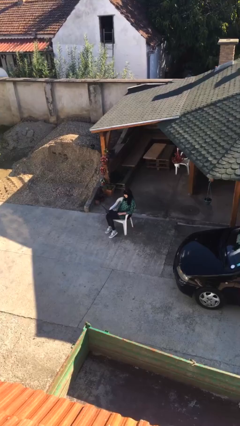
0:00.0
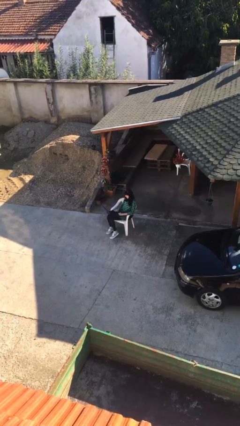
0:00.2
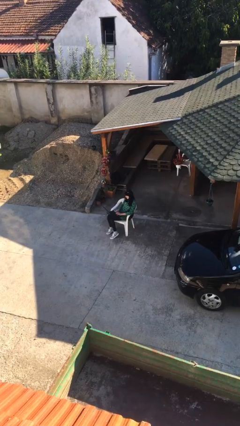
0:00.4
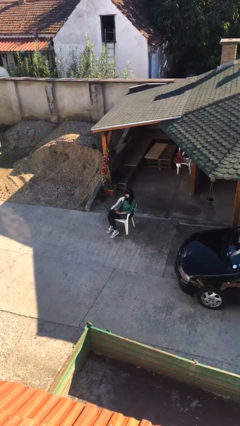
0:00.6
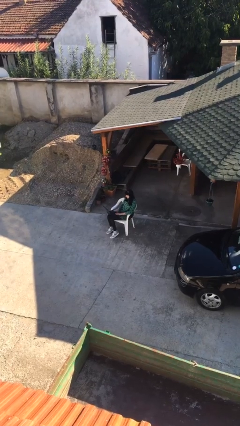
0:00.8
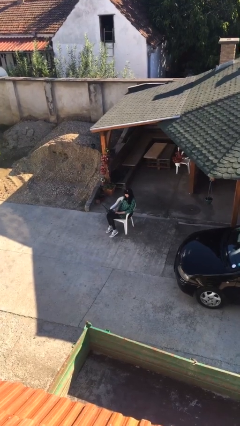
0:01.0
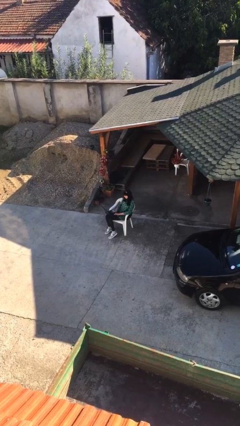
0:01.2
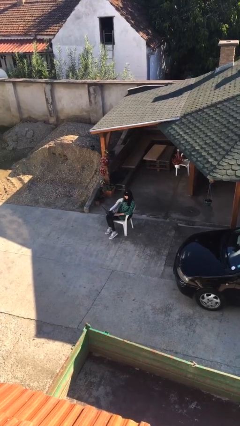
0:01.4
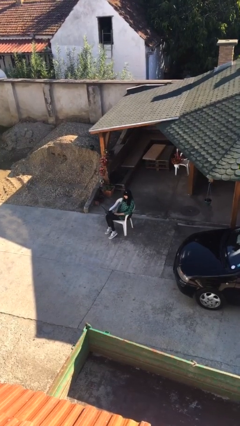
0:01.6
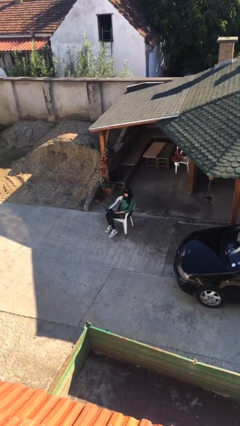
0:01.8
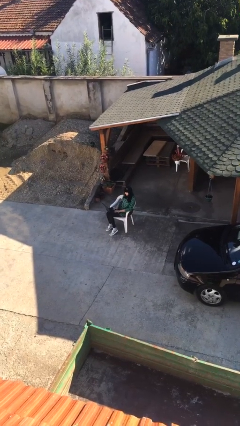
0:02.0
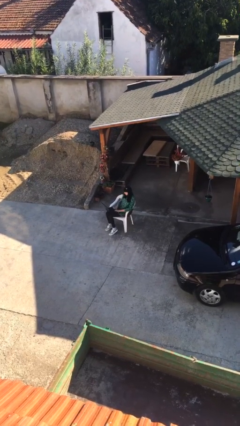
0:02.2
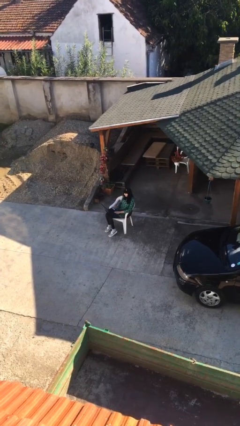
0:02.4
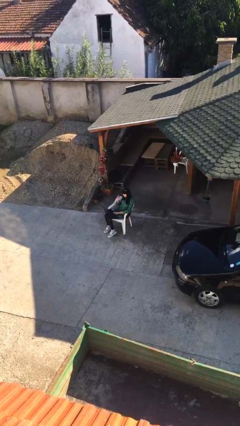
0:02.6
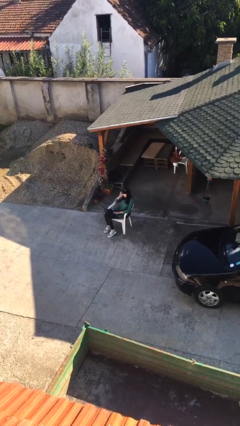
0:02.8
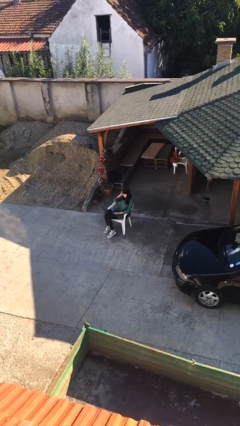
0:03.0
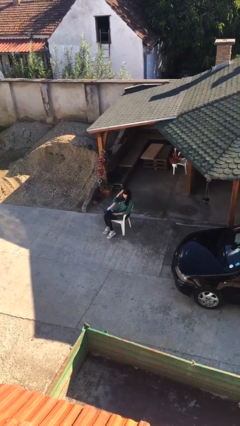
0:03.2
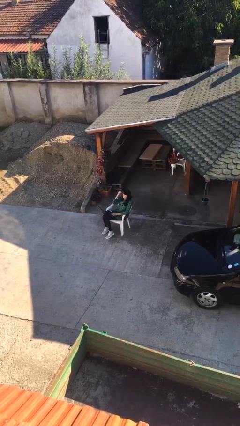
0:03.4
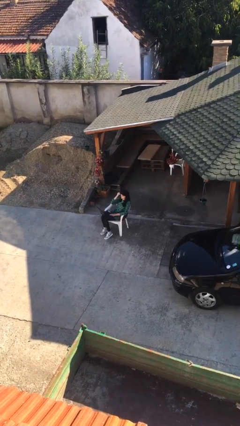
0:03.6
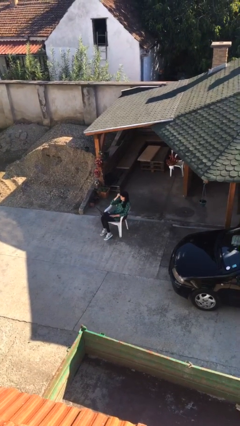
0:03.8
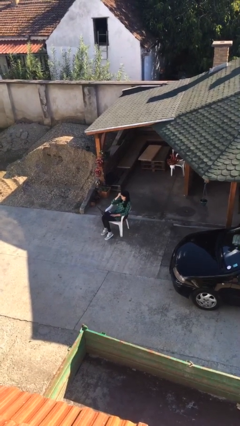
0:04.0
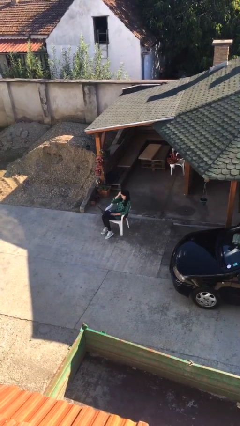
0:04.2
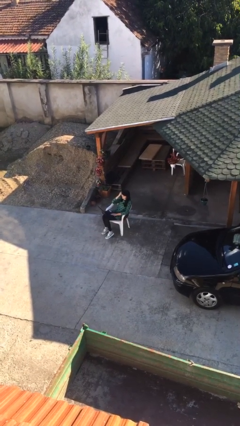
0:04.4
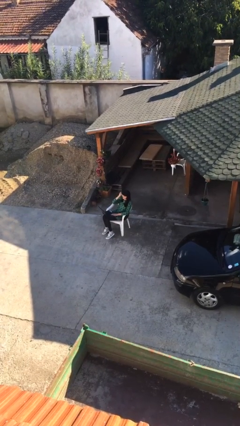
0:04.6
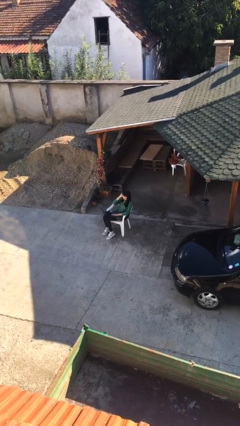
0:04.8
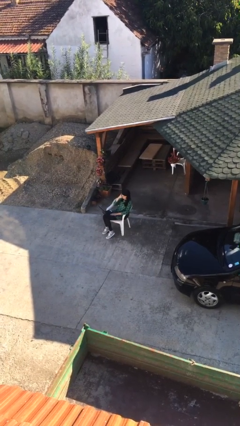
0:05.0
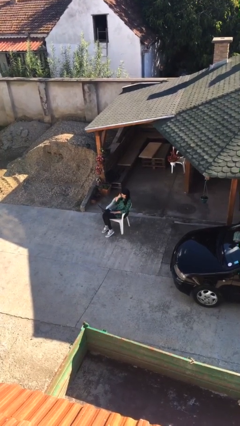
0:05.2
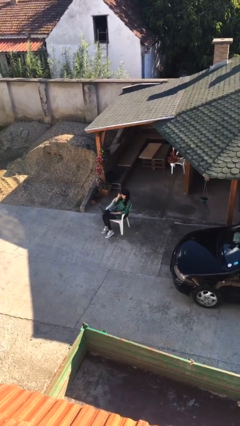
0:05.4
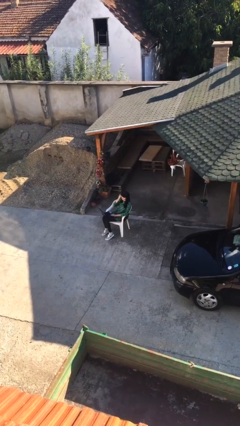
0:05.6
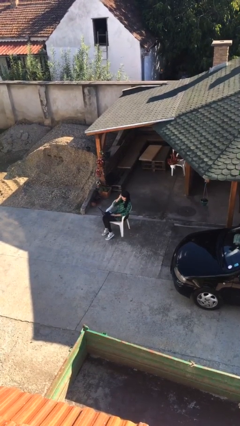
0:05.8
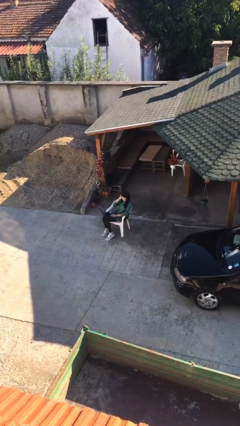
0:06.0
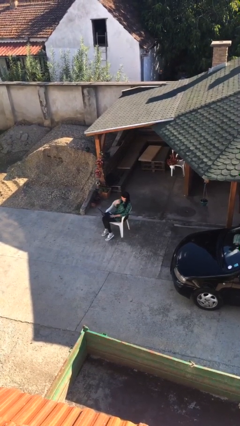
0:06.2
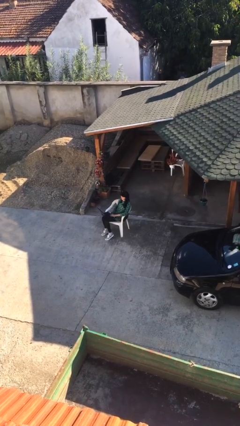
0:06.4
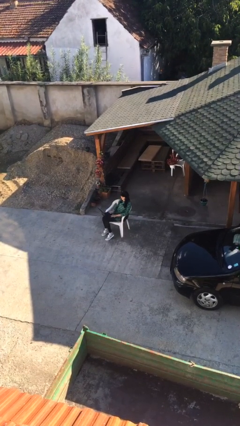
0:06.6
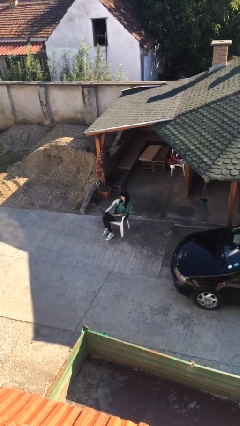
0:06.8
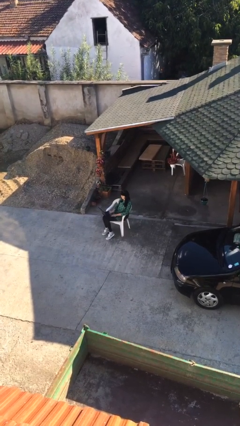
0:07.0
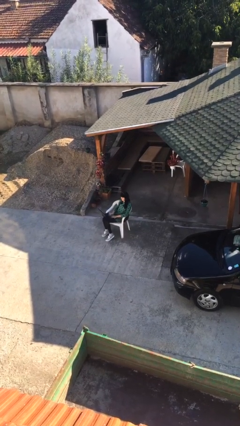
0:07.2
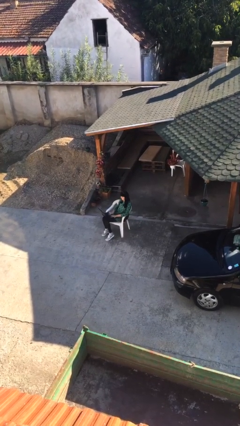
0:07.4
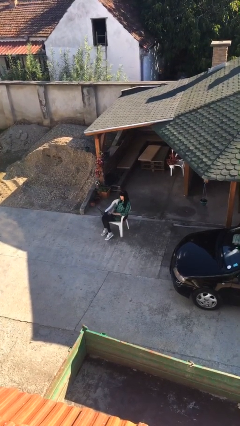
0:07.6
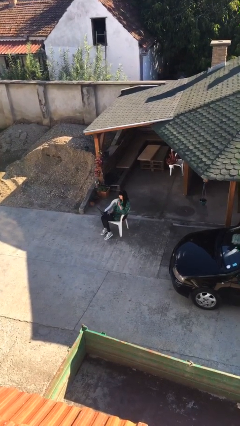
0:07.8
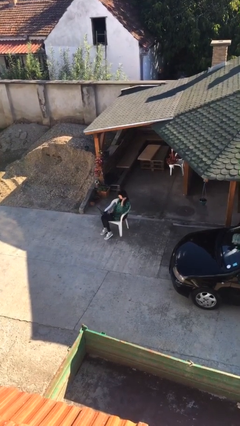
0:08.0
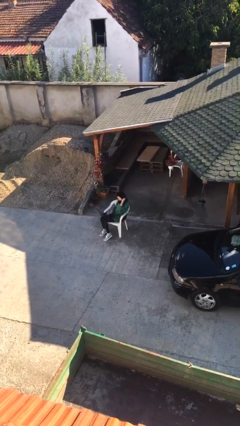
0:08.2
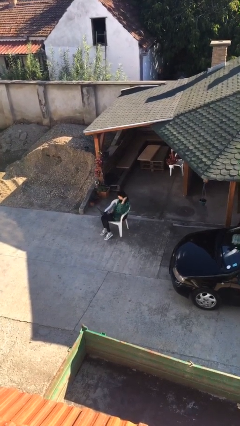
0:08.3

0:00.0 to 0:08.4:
person interacts with laptop

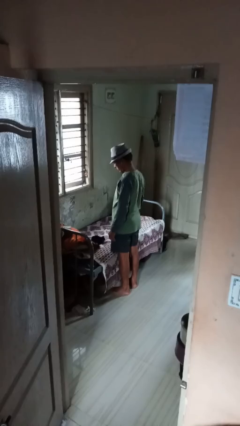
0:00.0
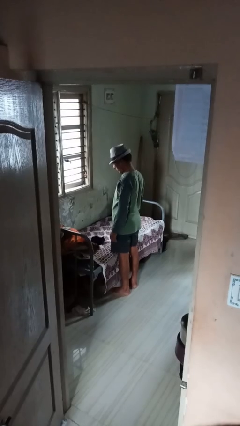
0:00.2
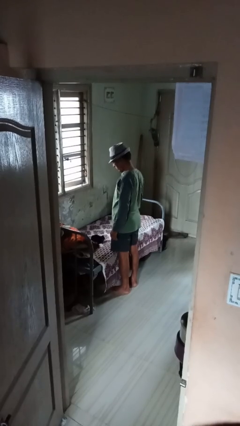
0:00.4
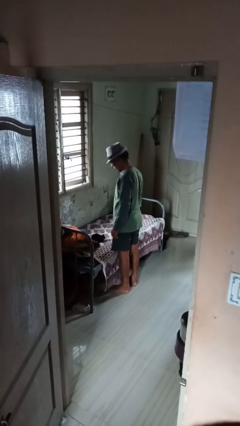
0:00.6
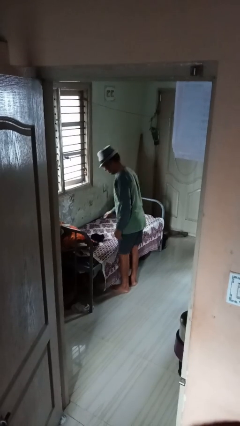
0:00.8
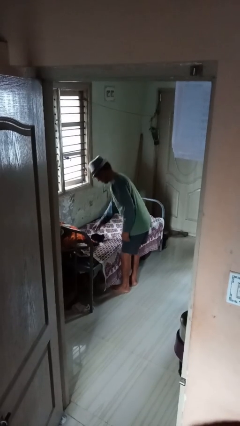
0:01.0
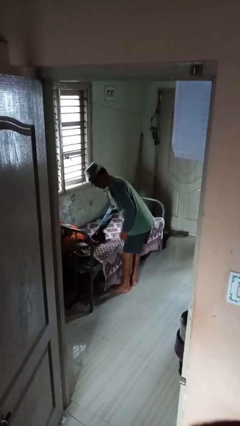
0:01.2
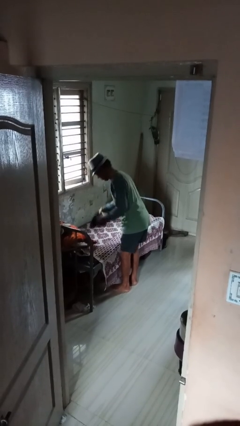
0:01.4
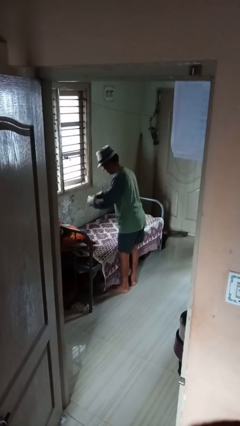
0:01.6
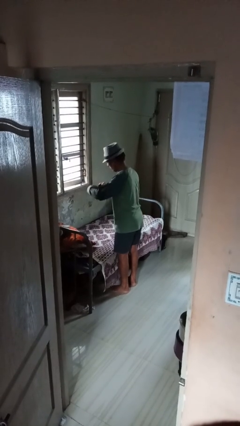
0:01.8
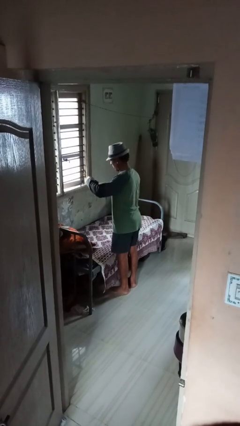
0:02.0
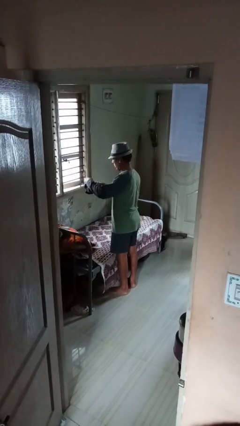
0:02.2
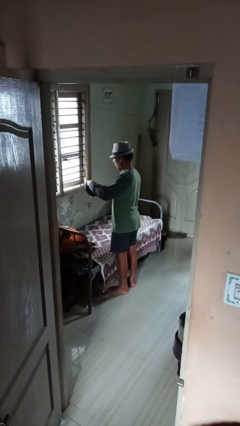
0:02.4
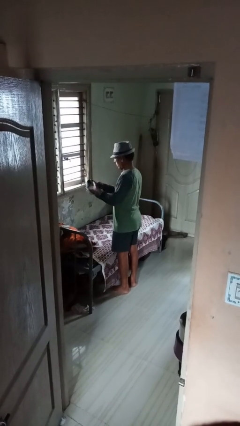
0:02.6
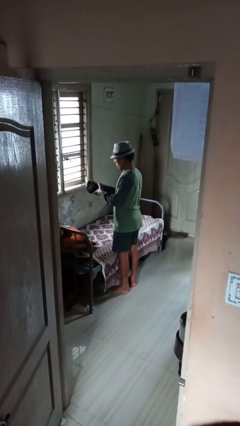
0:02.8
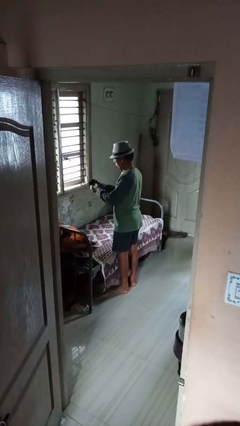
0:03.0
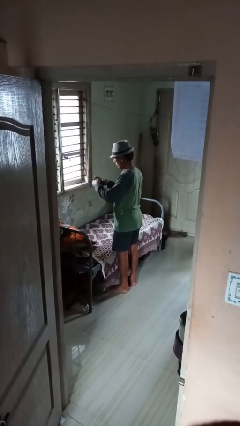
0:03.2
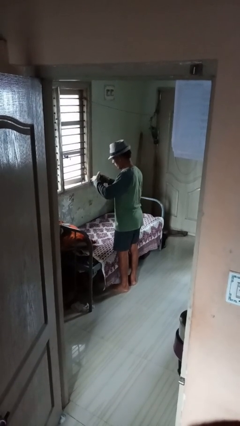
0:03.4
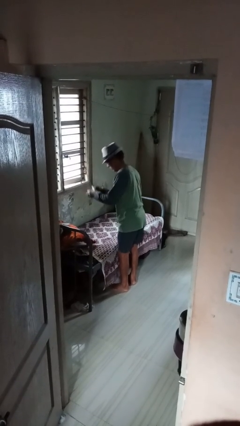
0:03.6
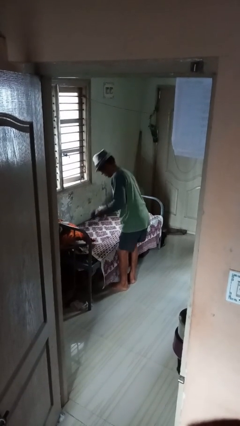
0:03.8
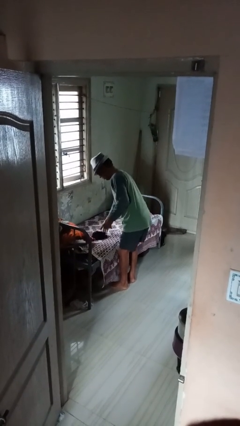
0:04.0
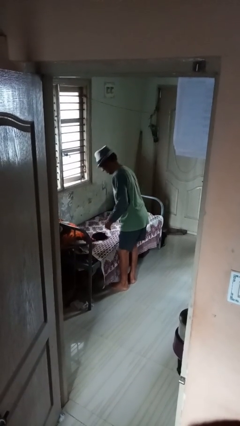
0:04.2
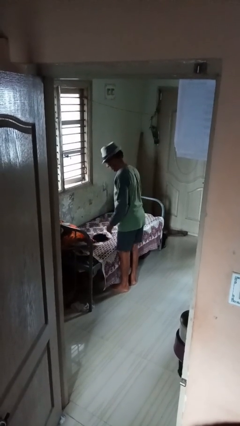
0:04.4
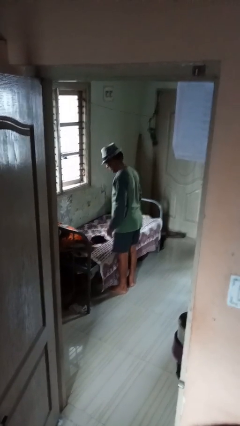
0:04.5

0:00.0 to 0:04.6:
person folds socks

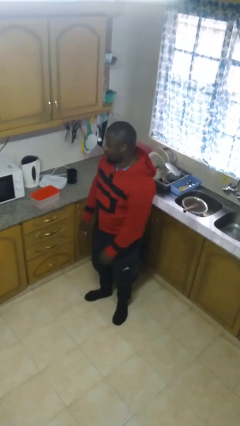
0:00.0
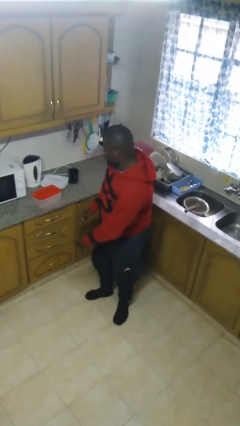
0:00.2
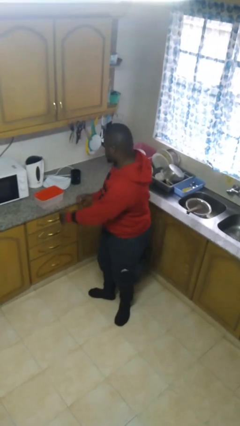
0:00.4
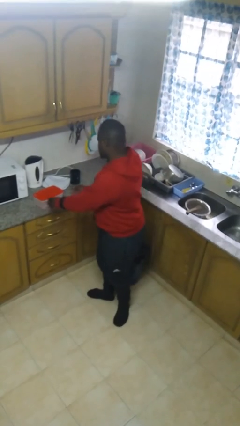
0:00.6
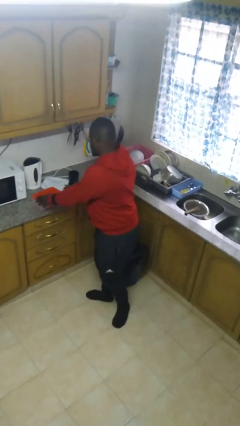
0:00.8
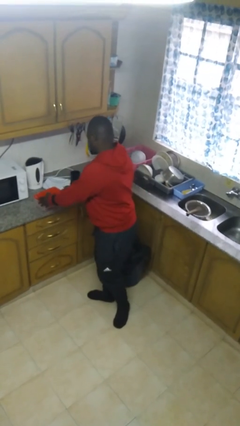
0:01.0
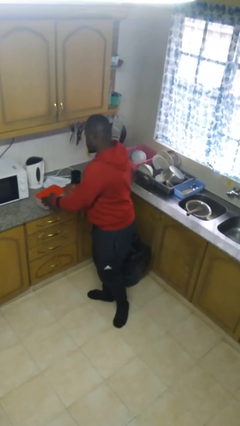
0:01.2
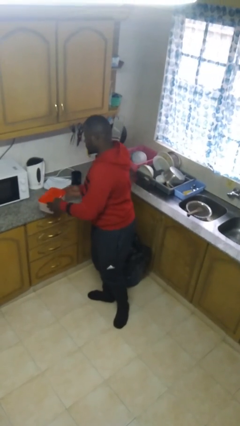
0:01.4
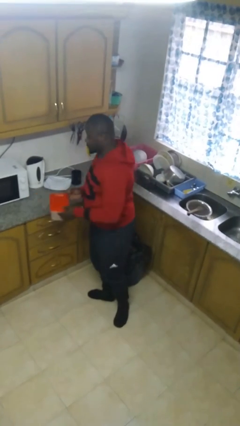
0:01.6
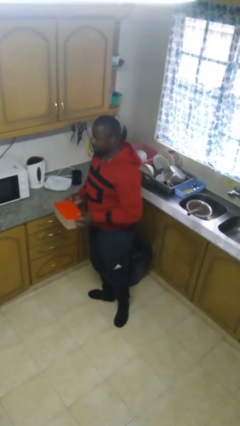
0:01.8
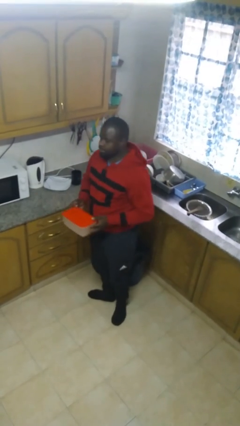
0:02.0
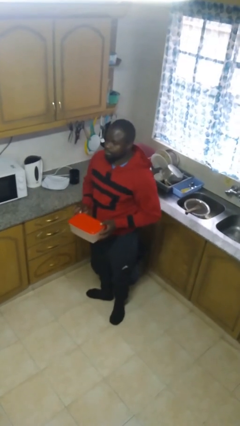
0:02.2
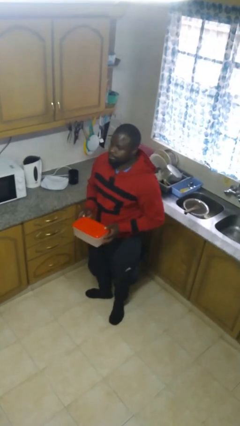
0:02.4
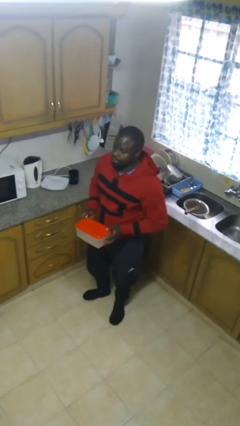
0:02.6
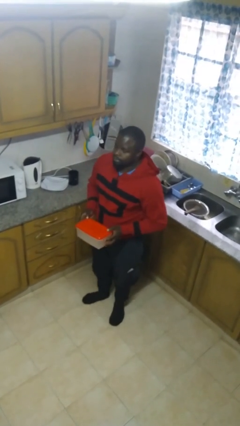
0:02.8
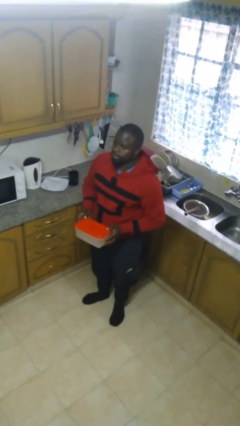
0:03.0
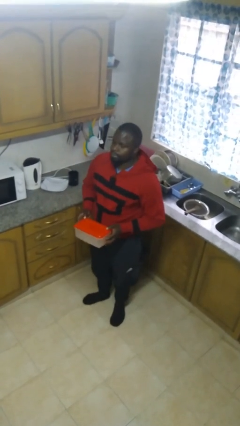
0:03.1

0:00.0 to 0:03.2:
person picks up object from countertop

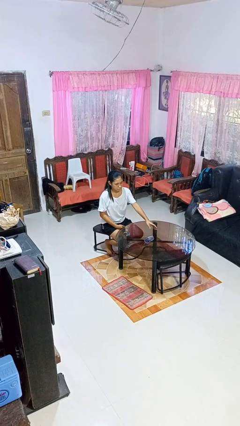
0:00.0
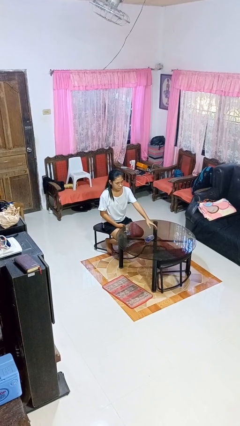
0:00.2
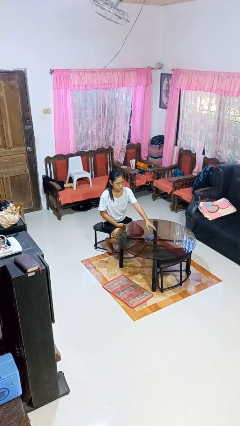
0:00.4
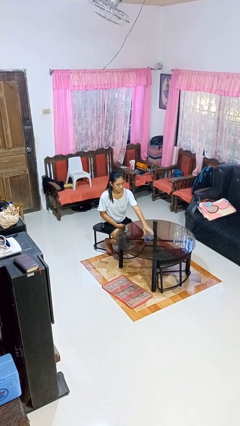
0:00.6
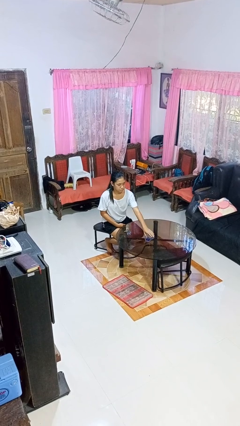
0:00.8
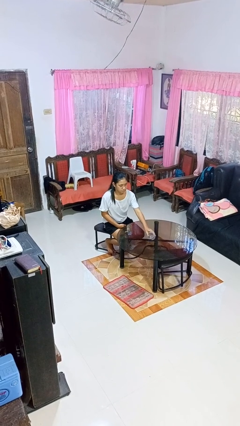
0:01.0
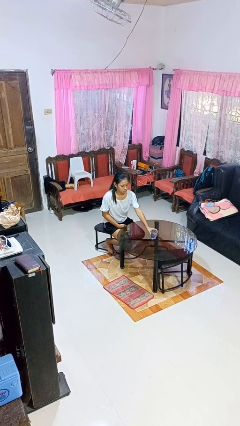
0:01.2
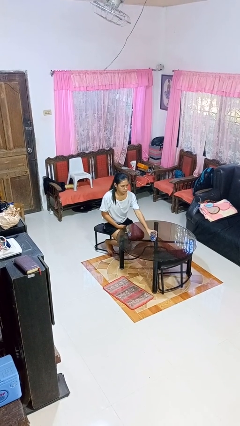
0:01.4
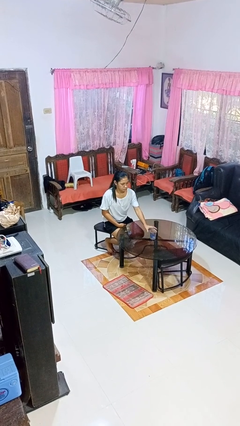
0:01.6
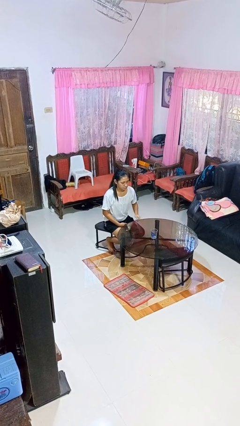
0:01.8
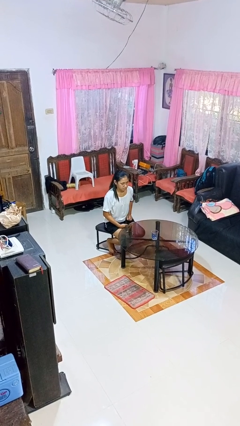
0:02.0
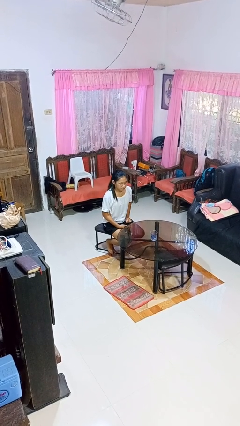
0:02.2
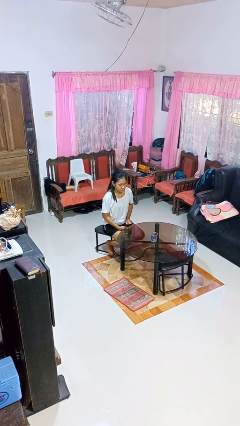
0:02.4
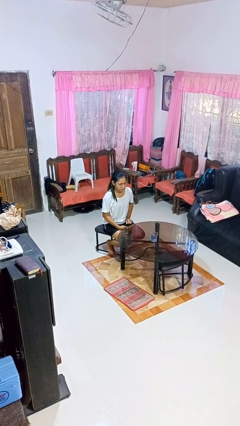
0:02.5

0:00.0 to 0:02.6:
person sets upright glass
